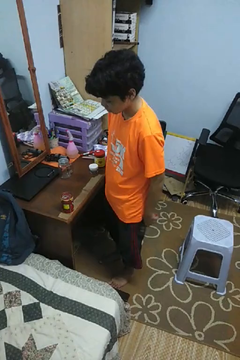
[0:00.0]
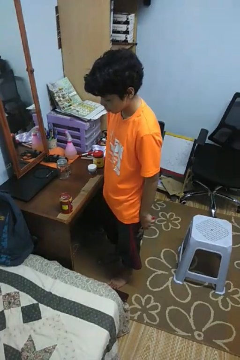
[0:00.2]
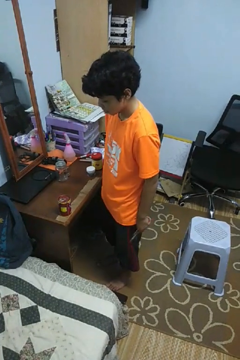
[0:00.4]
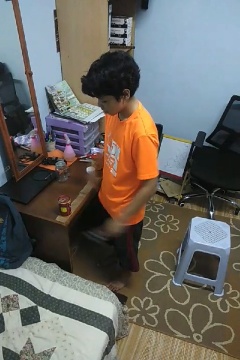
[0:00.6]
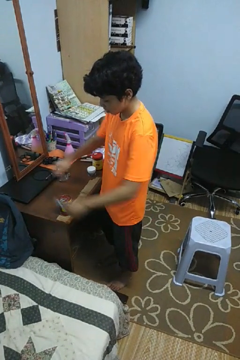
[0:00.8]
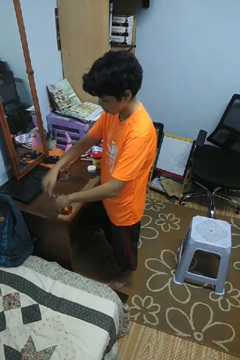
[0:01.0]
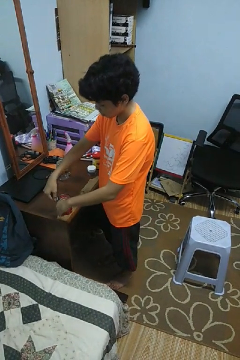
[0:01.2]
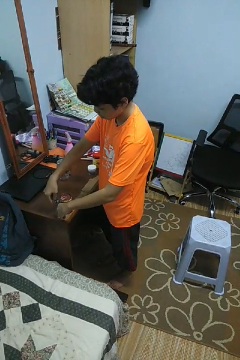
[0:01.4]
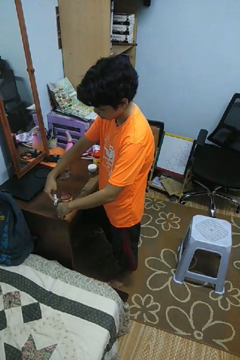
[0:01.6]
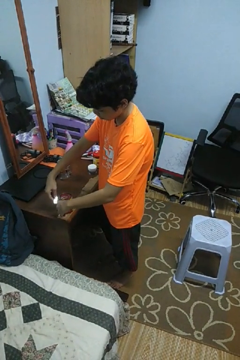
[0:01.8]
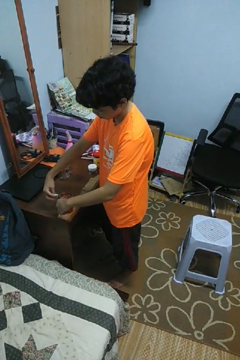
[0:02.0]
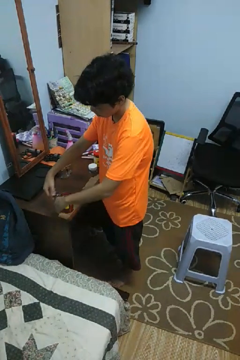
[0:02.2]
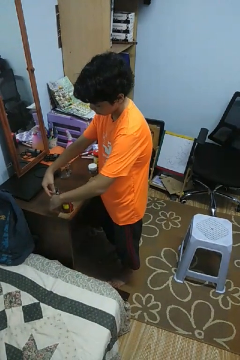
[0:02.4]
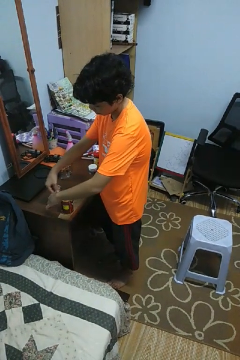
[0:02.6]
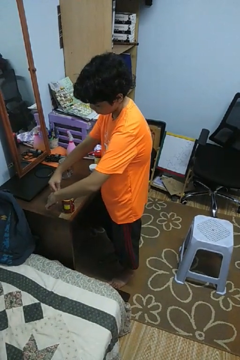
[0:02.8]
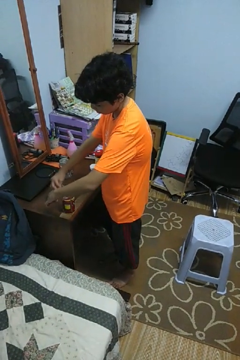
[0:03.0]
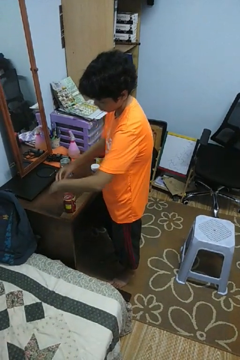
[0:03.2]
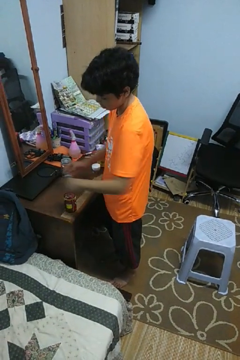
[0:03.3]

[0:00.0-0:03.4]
person opens can with can opener

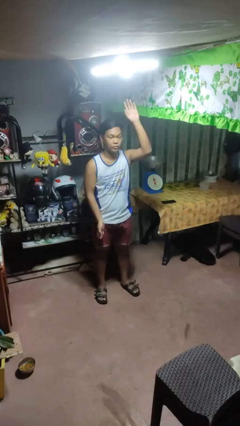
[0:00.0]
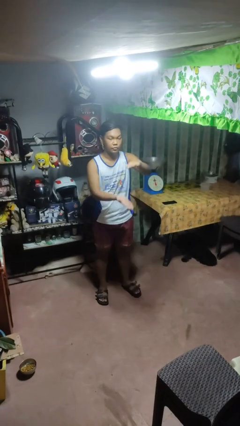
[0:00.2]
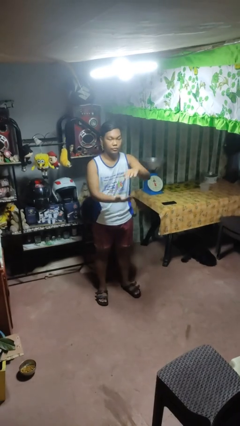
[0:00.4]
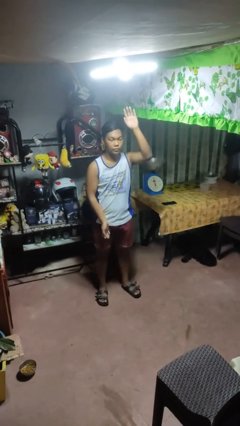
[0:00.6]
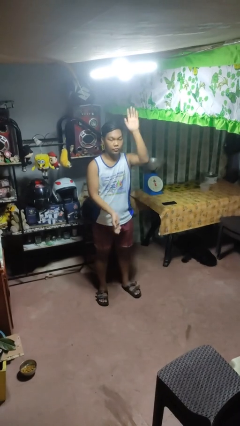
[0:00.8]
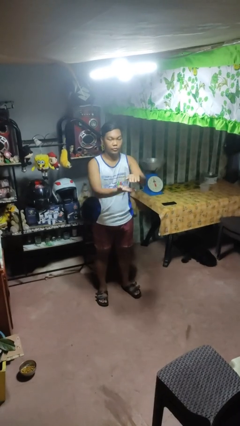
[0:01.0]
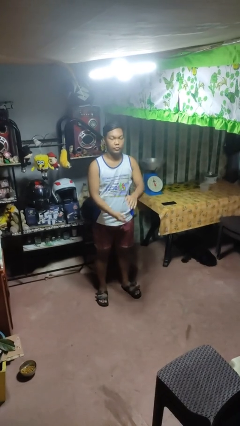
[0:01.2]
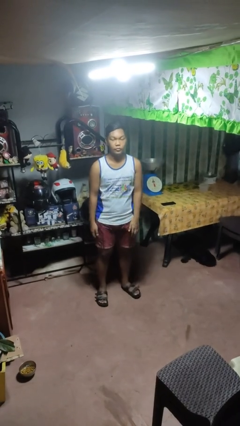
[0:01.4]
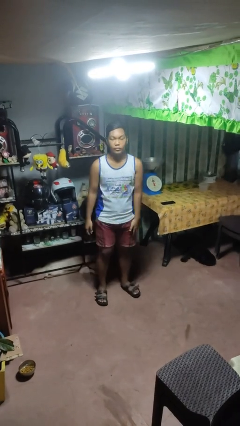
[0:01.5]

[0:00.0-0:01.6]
person gestures zoom out

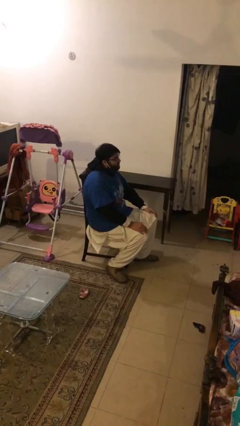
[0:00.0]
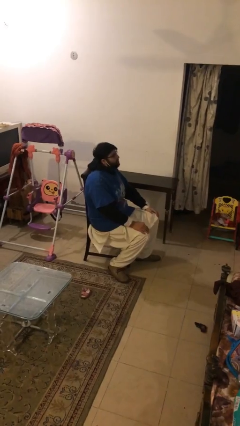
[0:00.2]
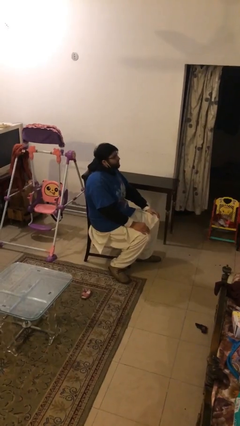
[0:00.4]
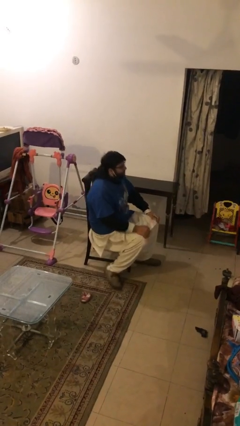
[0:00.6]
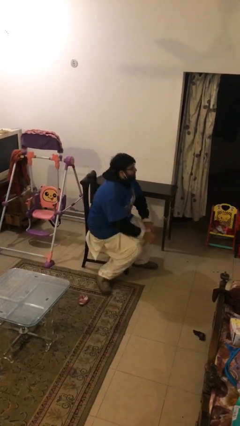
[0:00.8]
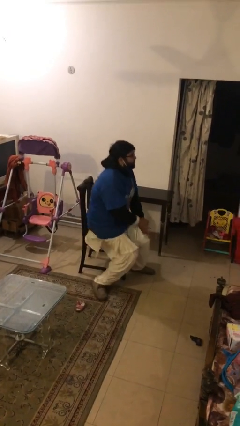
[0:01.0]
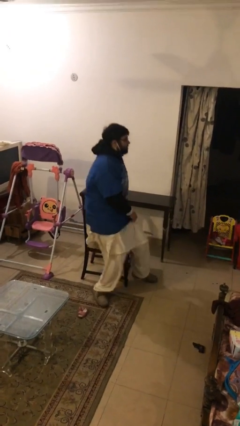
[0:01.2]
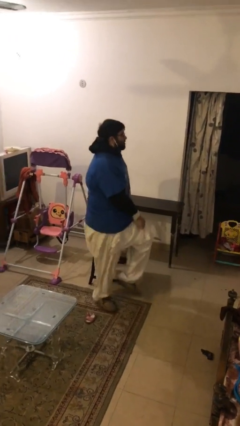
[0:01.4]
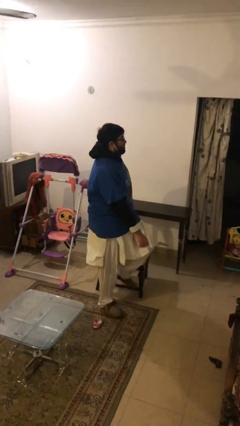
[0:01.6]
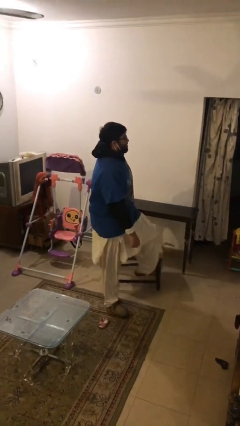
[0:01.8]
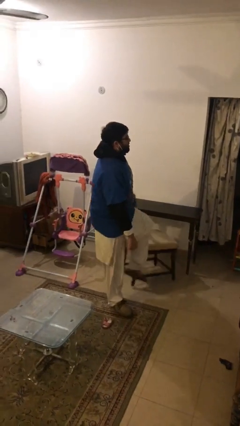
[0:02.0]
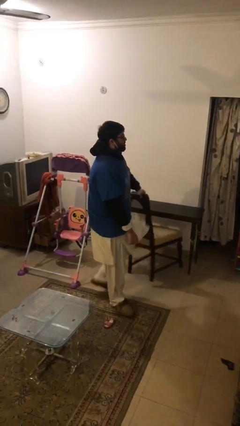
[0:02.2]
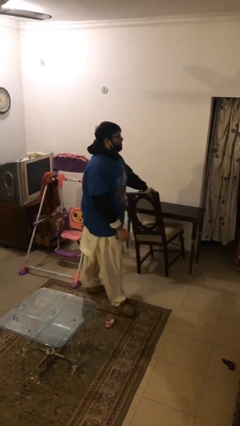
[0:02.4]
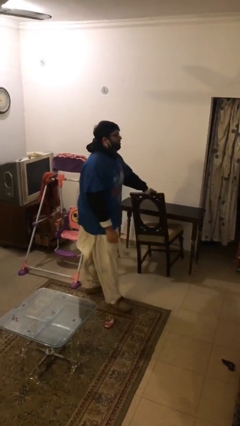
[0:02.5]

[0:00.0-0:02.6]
person stands up

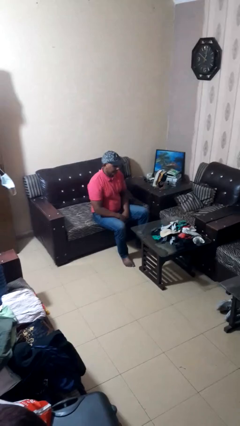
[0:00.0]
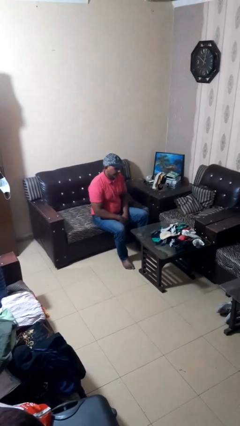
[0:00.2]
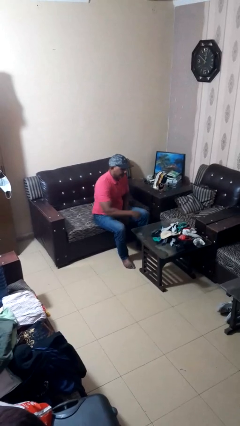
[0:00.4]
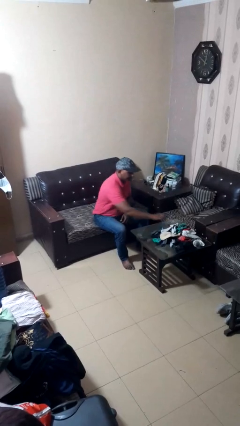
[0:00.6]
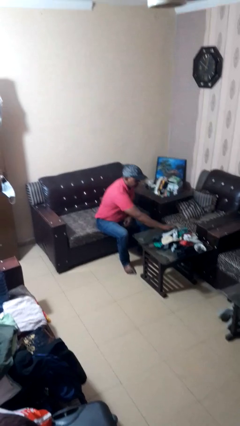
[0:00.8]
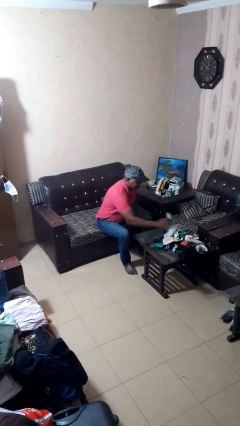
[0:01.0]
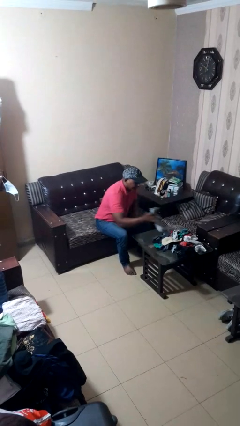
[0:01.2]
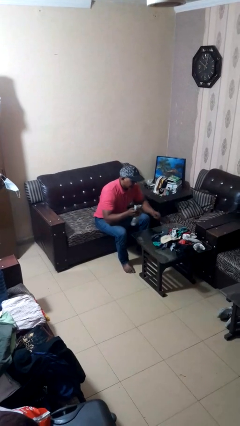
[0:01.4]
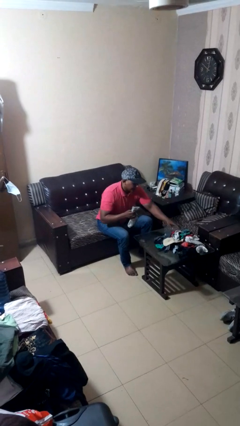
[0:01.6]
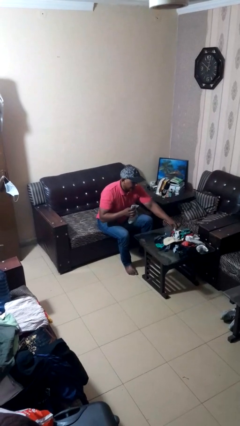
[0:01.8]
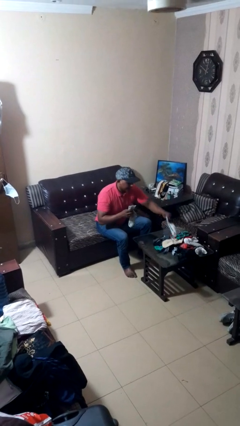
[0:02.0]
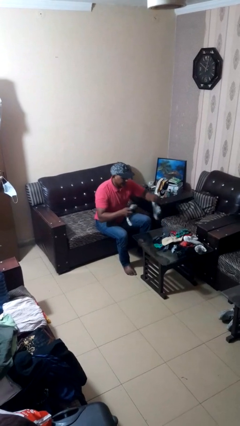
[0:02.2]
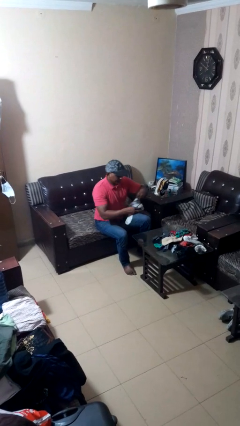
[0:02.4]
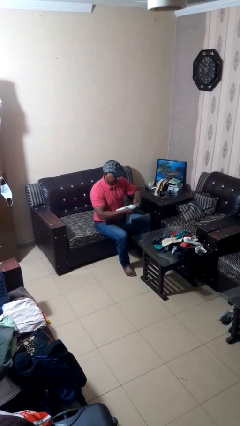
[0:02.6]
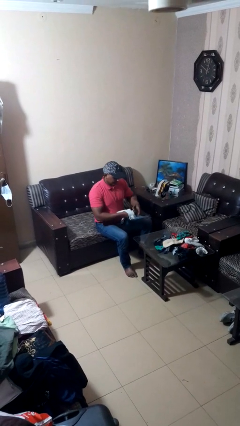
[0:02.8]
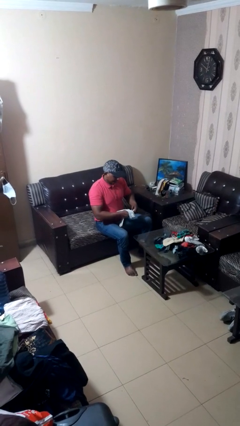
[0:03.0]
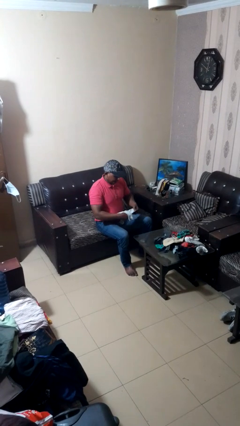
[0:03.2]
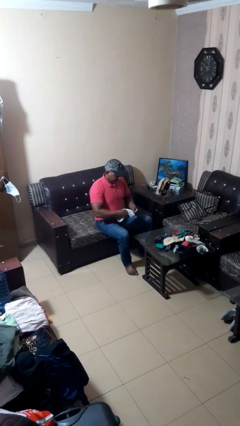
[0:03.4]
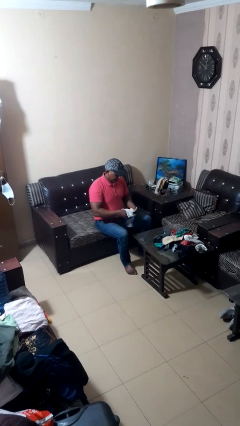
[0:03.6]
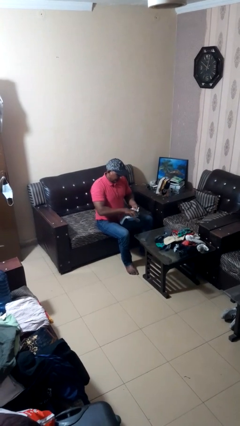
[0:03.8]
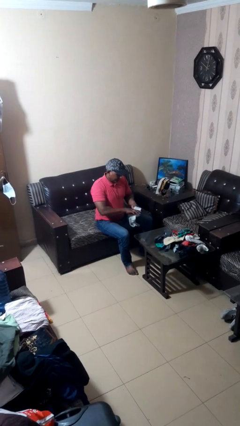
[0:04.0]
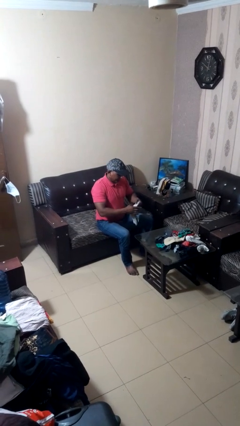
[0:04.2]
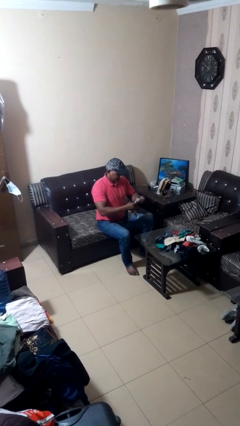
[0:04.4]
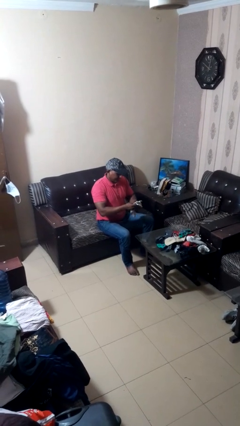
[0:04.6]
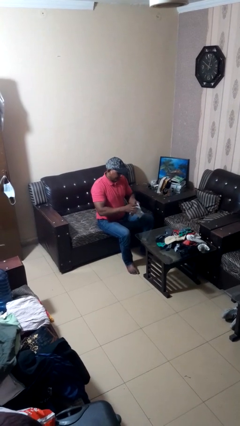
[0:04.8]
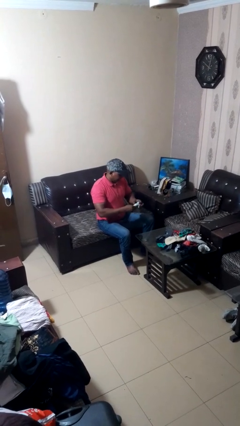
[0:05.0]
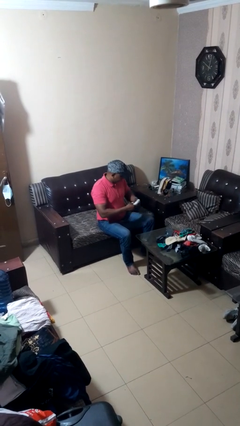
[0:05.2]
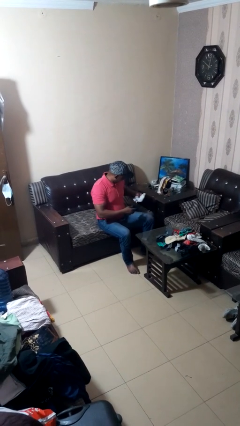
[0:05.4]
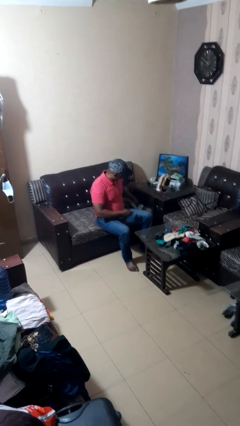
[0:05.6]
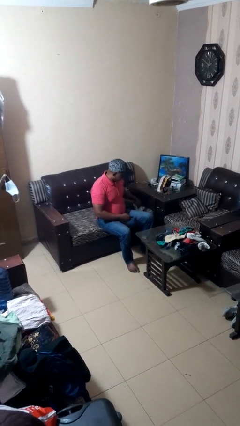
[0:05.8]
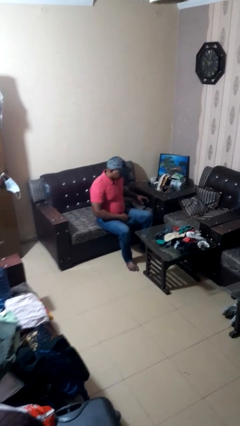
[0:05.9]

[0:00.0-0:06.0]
person folds socks

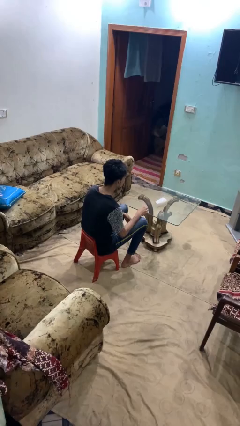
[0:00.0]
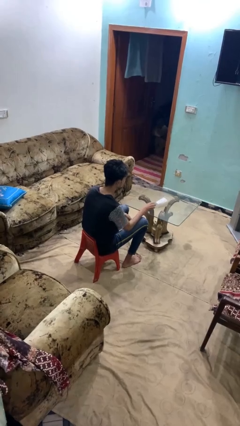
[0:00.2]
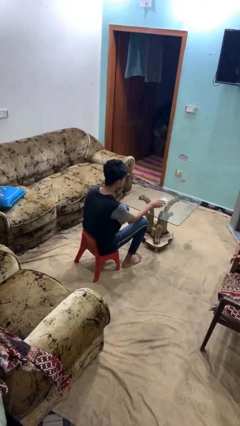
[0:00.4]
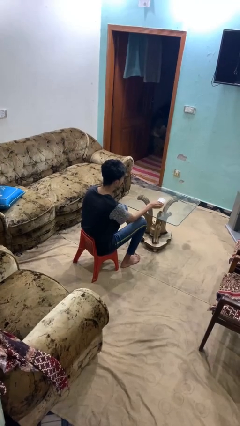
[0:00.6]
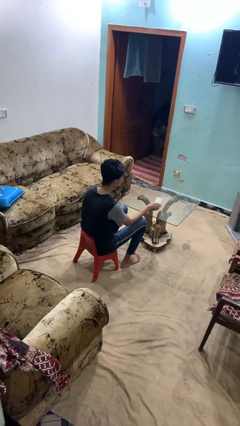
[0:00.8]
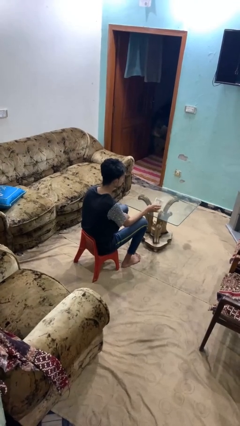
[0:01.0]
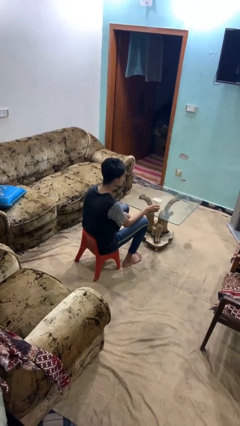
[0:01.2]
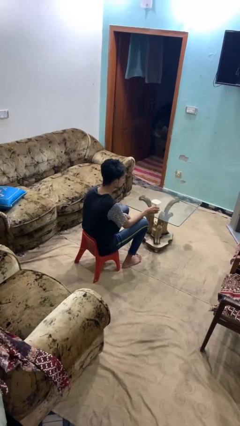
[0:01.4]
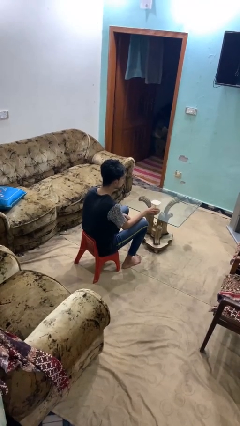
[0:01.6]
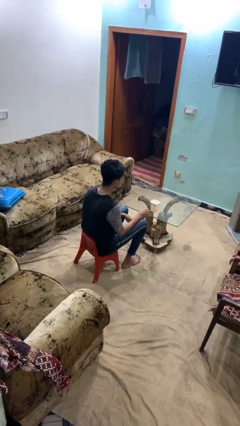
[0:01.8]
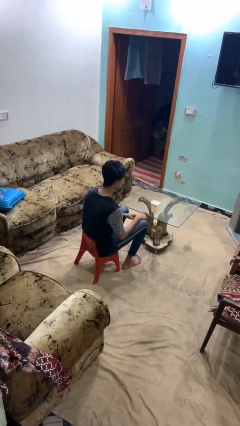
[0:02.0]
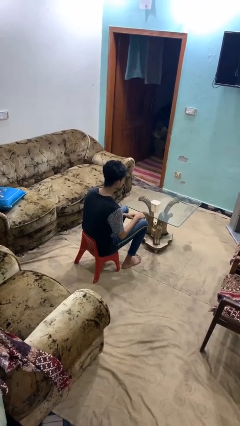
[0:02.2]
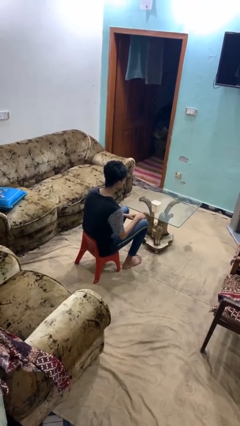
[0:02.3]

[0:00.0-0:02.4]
person sets upright glass

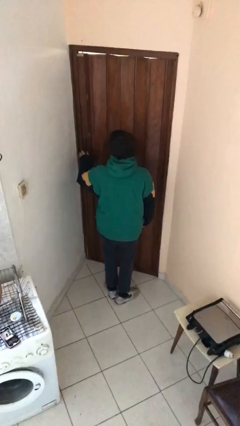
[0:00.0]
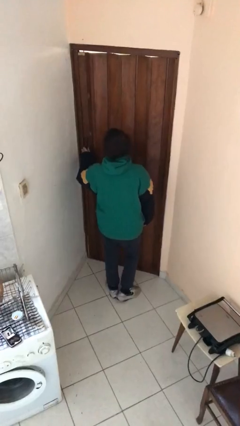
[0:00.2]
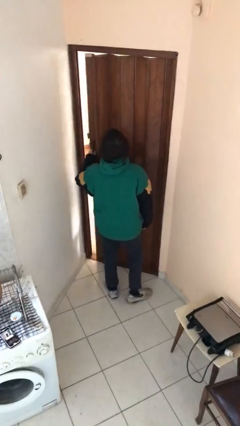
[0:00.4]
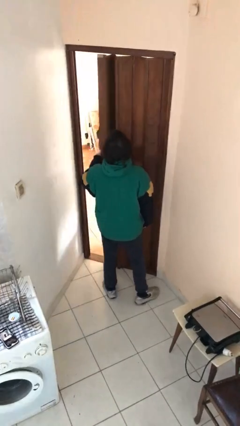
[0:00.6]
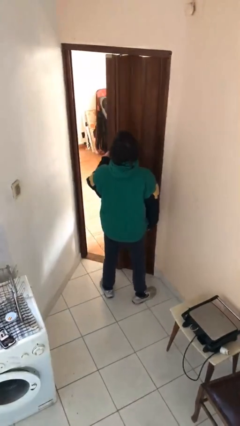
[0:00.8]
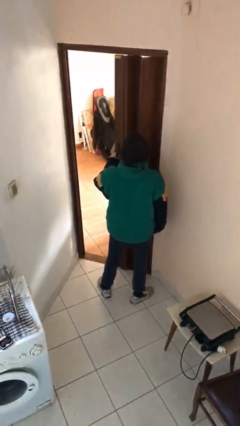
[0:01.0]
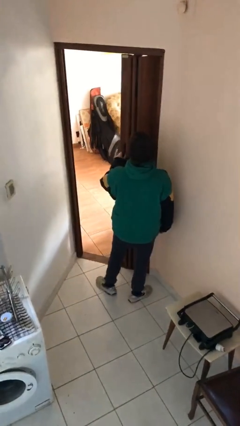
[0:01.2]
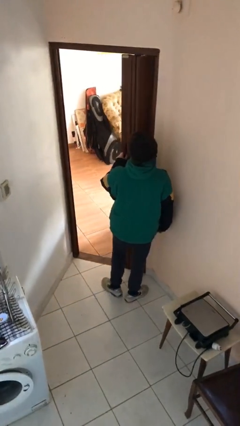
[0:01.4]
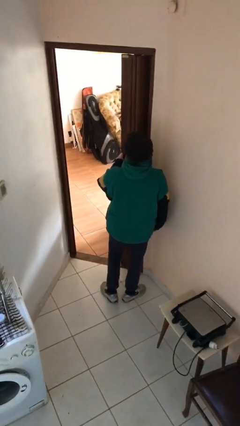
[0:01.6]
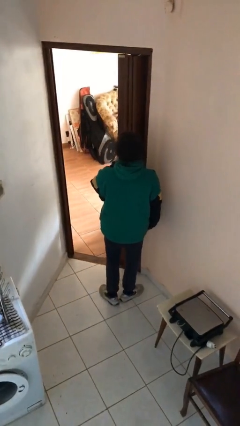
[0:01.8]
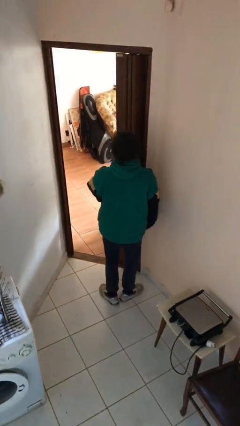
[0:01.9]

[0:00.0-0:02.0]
person opens sliding door
